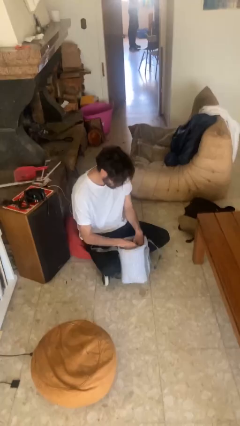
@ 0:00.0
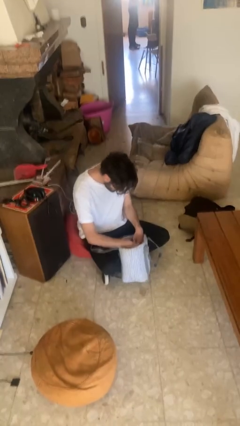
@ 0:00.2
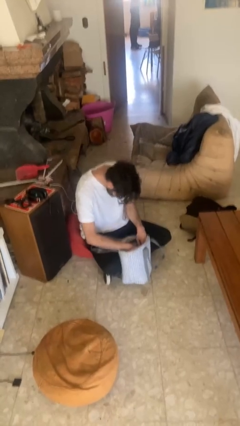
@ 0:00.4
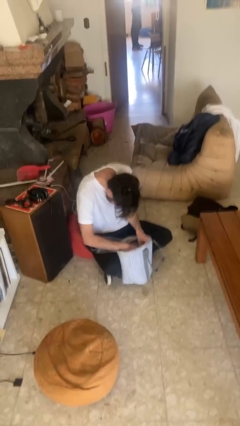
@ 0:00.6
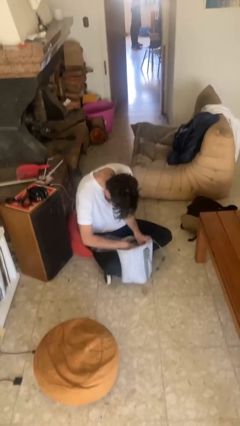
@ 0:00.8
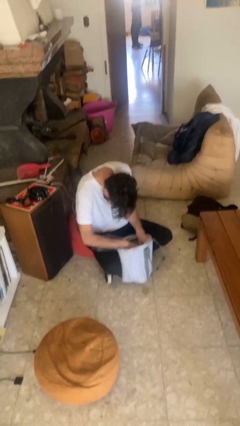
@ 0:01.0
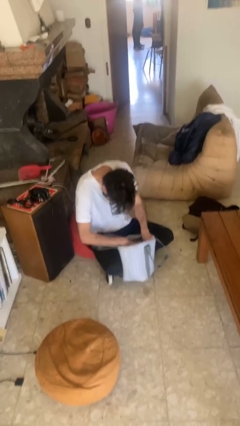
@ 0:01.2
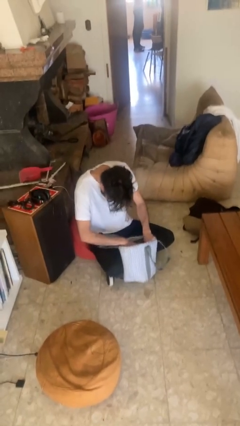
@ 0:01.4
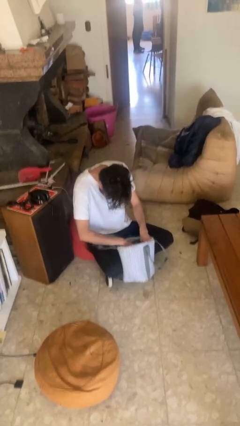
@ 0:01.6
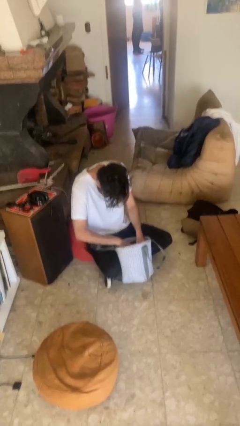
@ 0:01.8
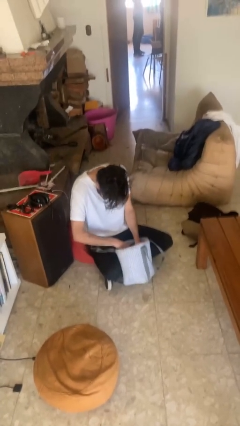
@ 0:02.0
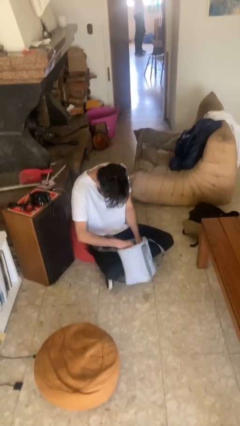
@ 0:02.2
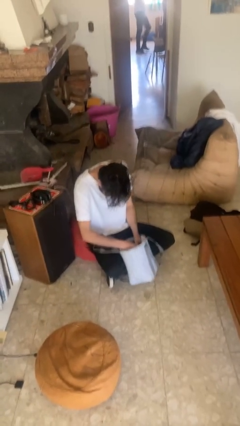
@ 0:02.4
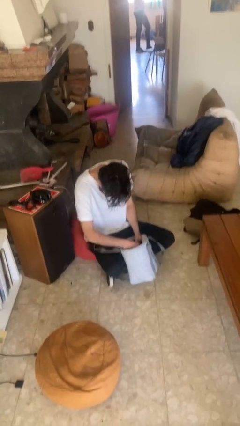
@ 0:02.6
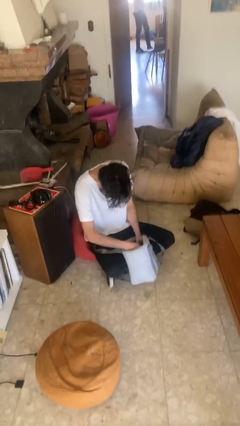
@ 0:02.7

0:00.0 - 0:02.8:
person searches in purse

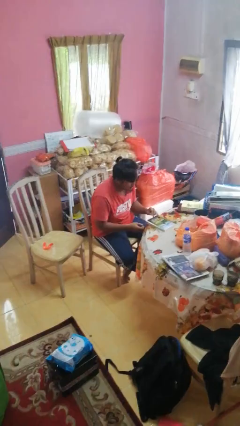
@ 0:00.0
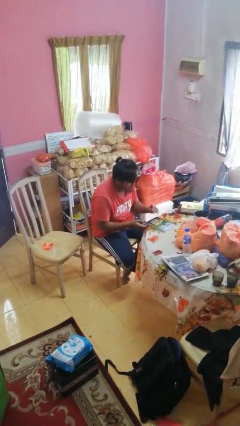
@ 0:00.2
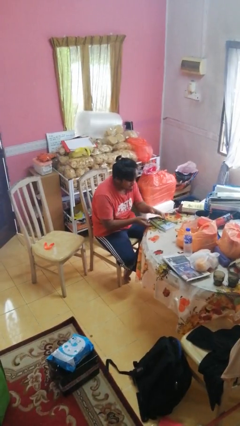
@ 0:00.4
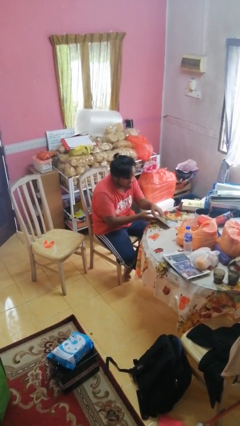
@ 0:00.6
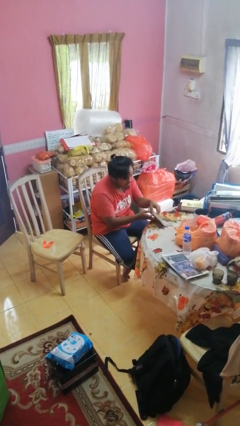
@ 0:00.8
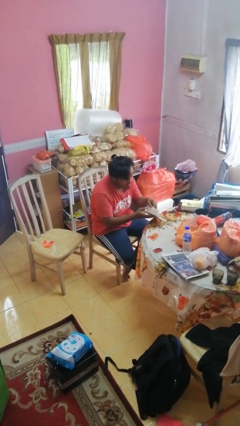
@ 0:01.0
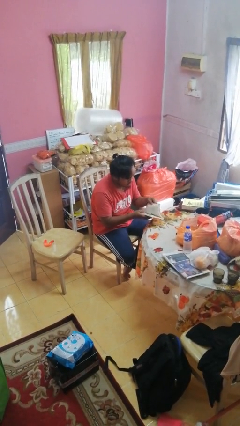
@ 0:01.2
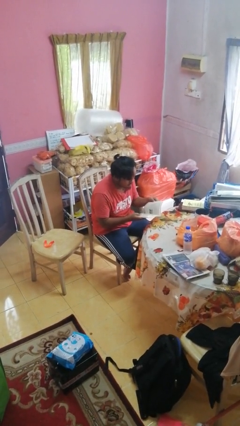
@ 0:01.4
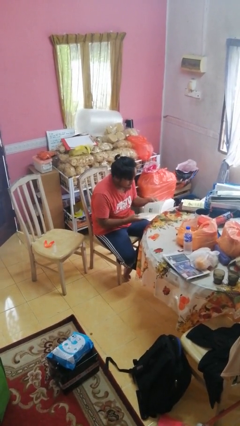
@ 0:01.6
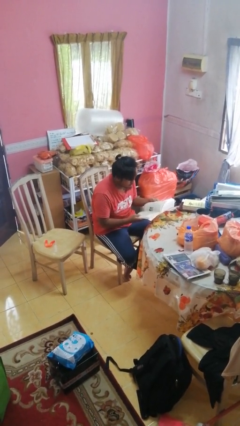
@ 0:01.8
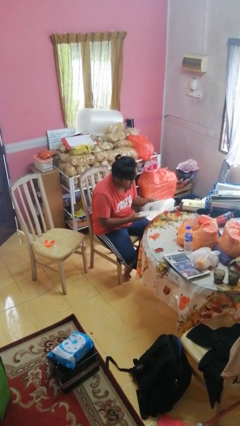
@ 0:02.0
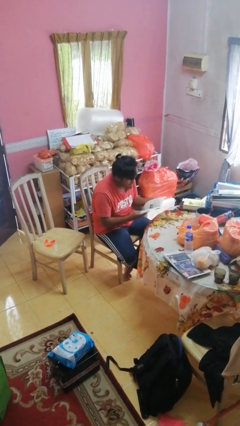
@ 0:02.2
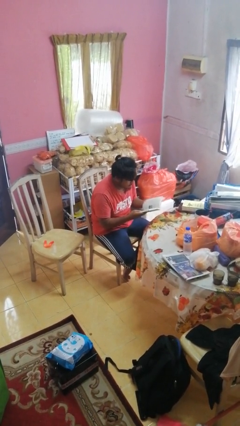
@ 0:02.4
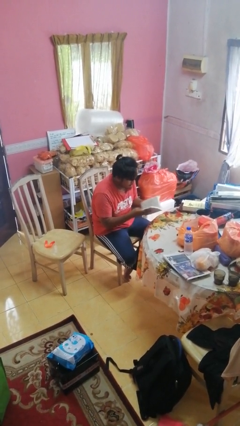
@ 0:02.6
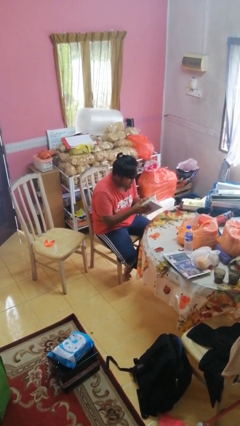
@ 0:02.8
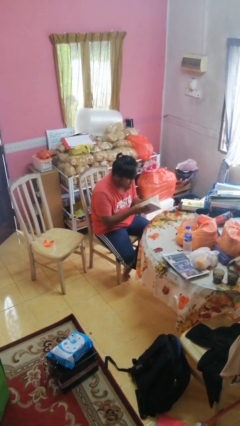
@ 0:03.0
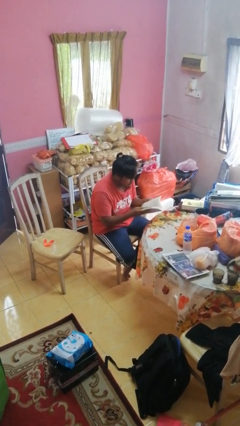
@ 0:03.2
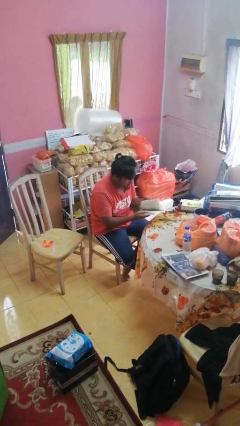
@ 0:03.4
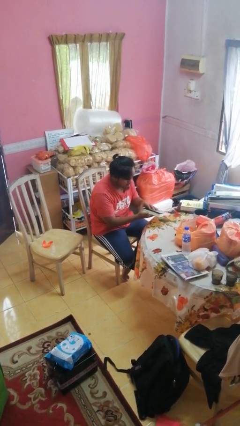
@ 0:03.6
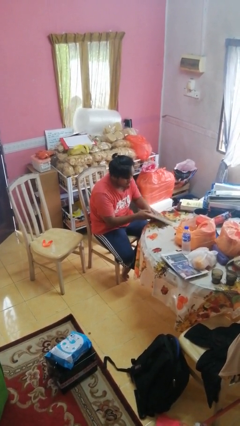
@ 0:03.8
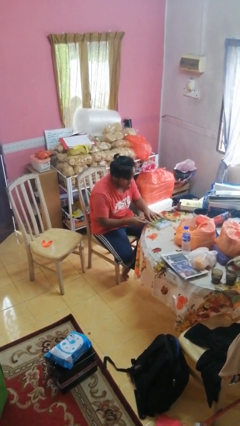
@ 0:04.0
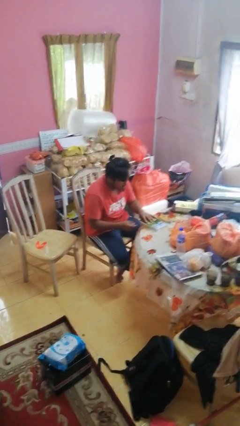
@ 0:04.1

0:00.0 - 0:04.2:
person reads book

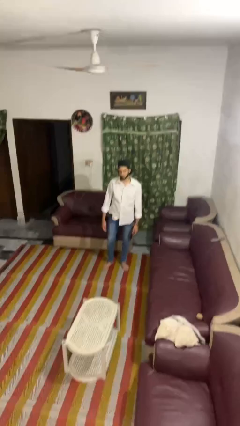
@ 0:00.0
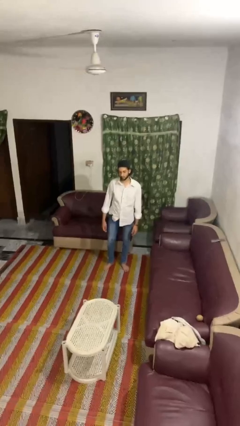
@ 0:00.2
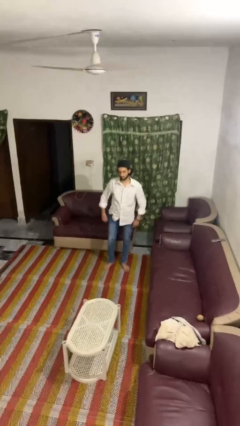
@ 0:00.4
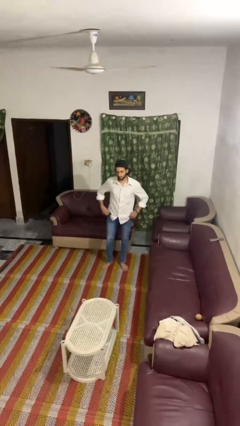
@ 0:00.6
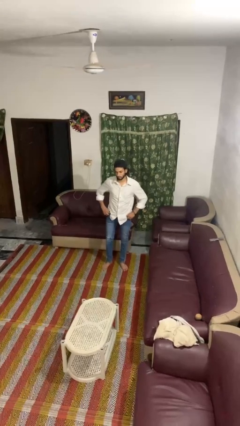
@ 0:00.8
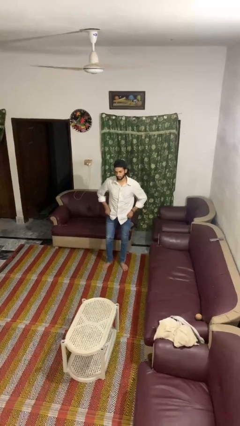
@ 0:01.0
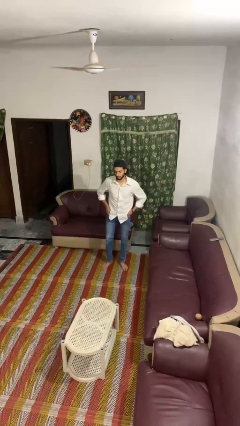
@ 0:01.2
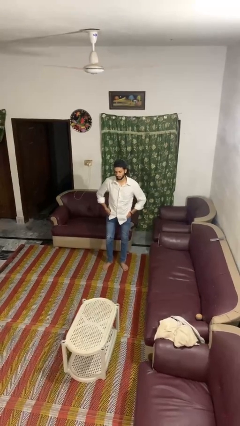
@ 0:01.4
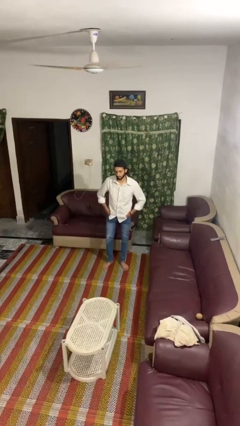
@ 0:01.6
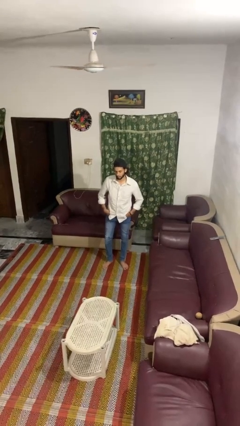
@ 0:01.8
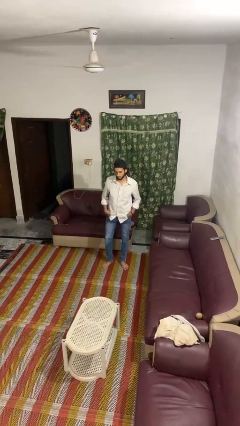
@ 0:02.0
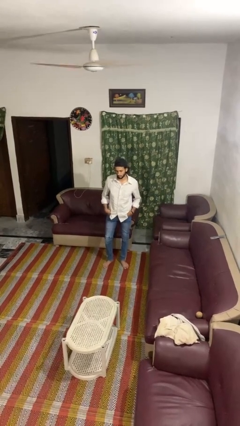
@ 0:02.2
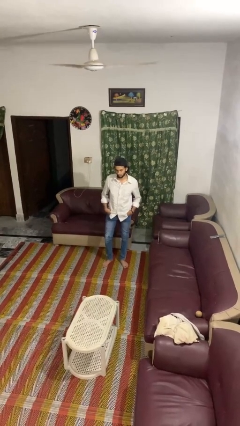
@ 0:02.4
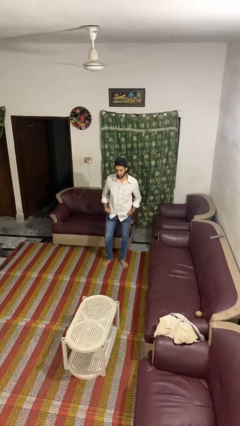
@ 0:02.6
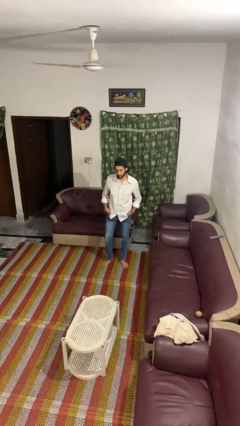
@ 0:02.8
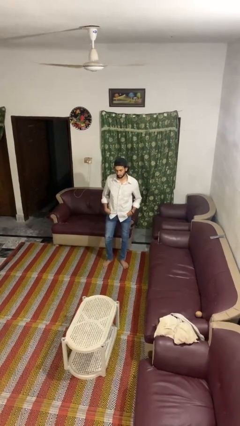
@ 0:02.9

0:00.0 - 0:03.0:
person puts hands in back pockets

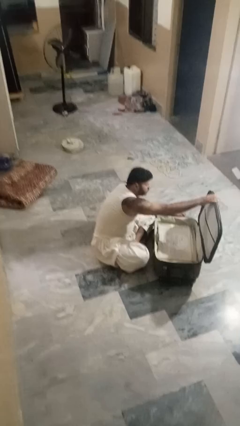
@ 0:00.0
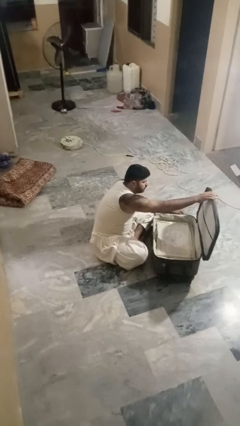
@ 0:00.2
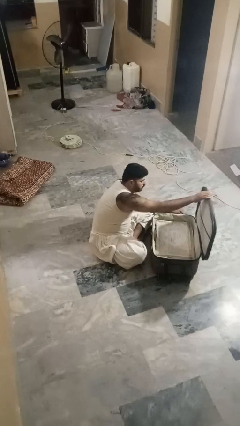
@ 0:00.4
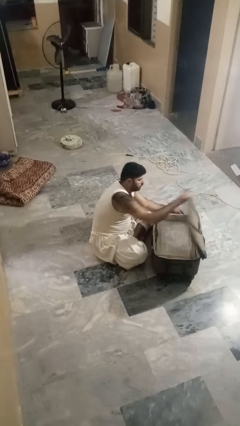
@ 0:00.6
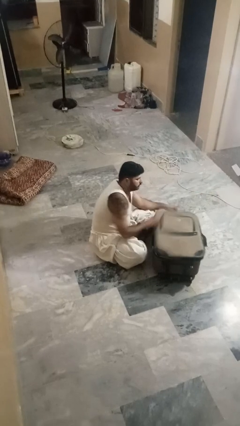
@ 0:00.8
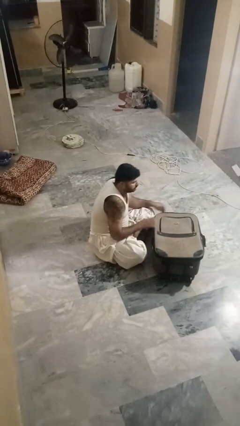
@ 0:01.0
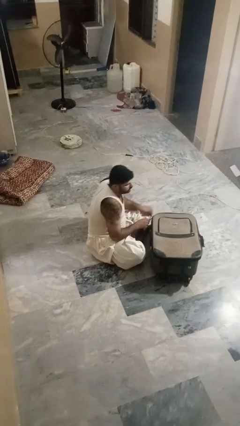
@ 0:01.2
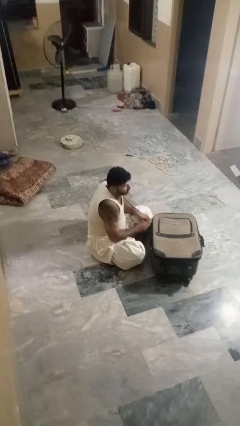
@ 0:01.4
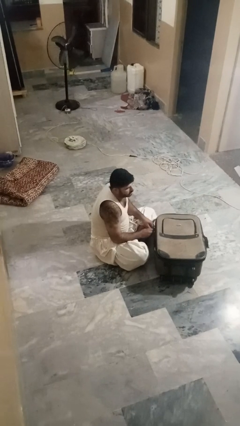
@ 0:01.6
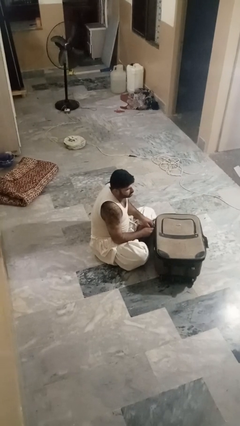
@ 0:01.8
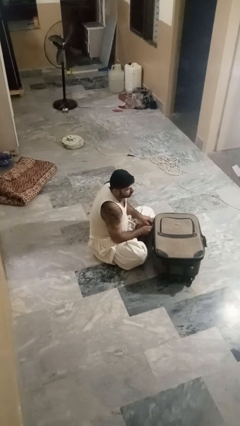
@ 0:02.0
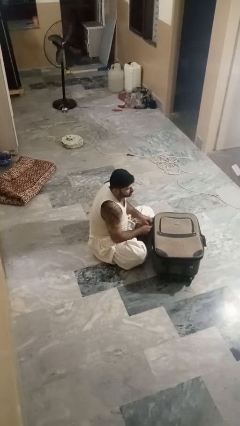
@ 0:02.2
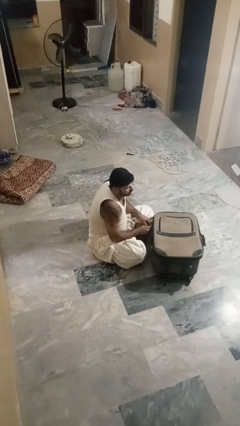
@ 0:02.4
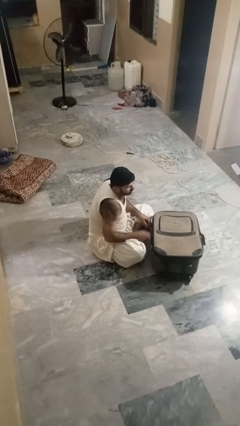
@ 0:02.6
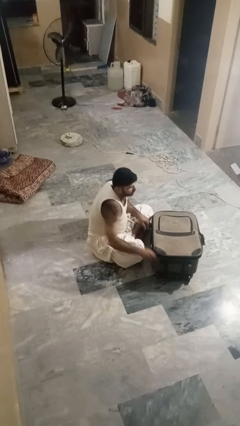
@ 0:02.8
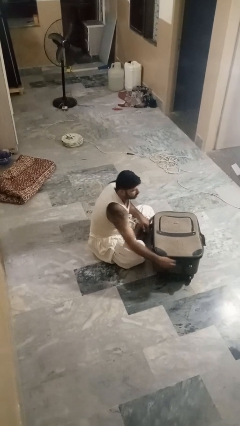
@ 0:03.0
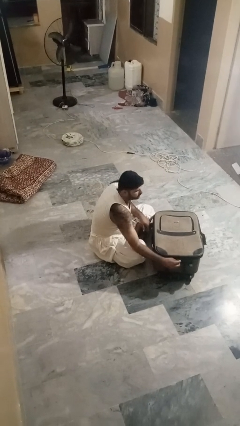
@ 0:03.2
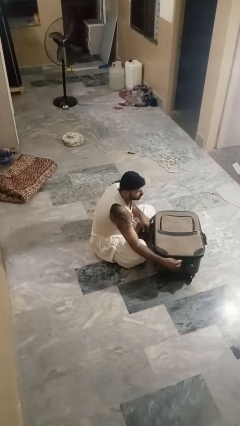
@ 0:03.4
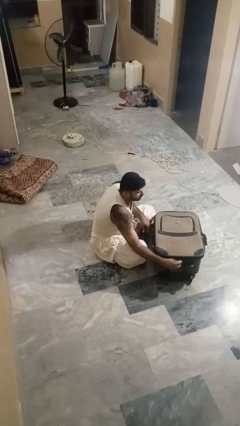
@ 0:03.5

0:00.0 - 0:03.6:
person closes suitcase

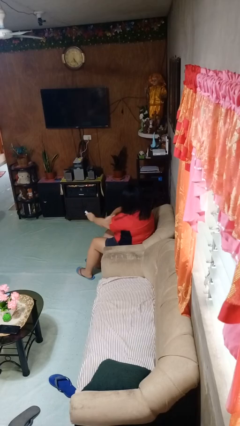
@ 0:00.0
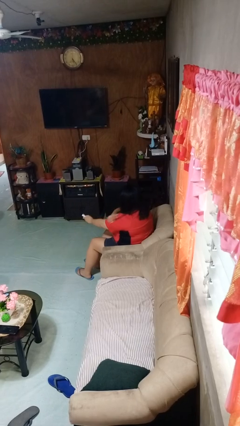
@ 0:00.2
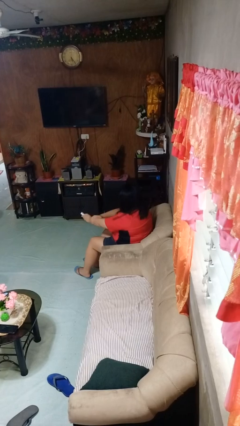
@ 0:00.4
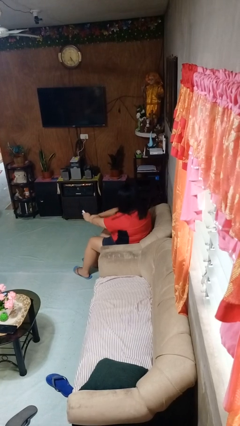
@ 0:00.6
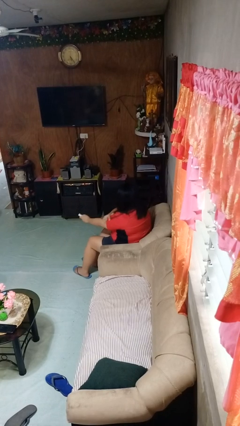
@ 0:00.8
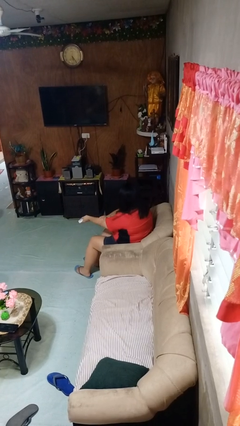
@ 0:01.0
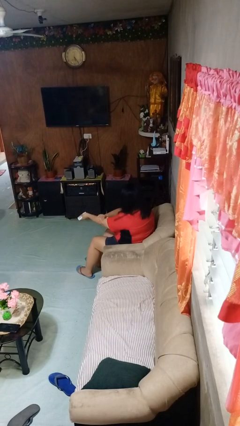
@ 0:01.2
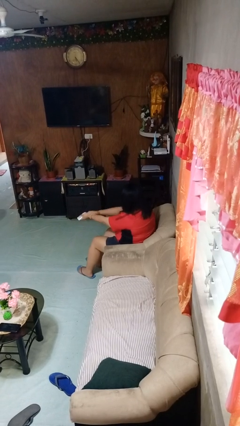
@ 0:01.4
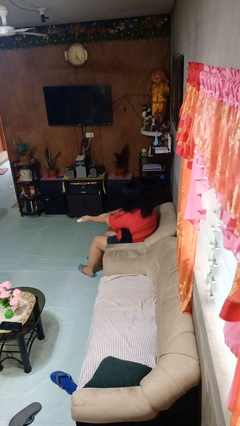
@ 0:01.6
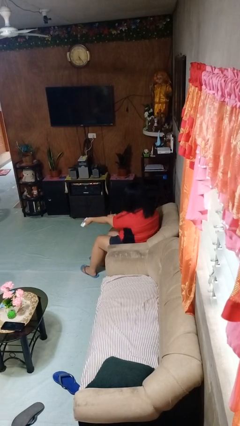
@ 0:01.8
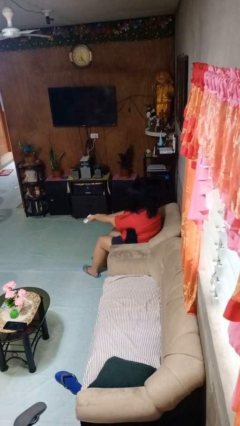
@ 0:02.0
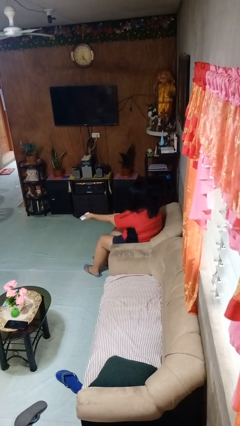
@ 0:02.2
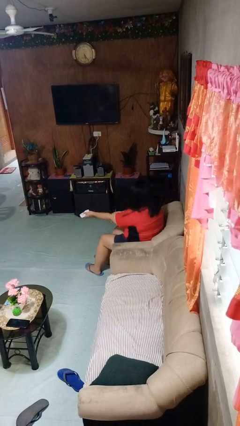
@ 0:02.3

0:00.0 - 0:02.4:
person applies sunscreen

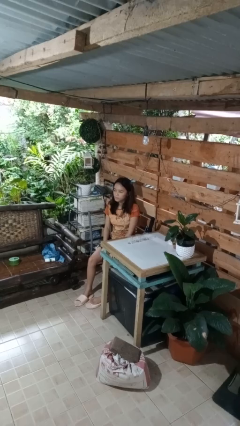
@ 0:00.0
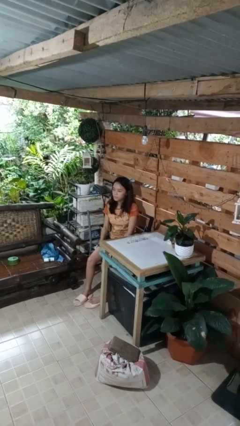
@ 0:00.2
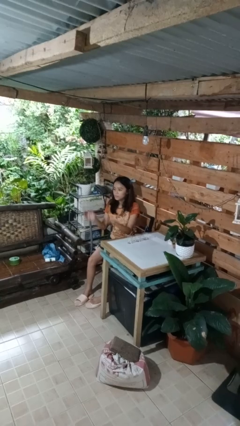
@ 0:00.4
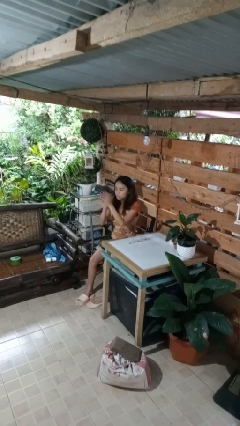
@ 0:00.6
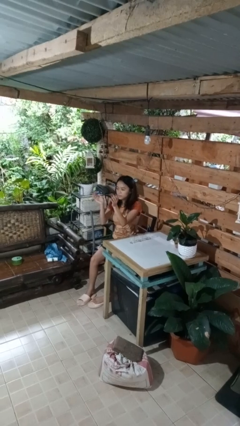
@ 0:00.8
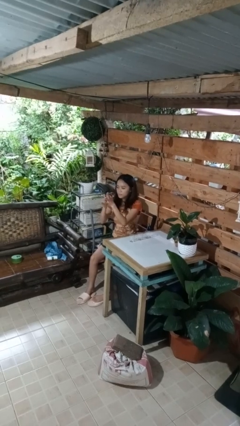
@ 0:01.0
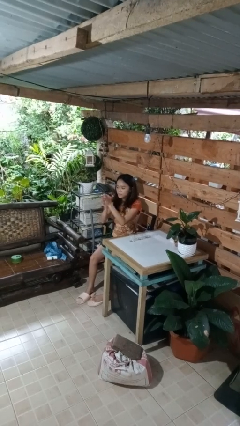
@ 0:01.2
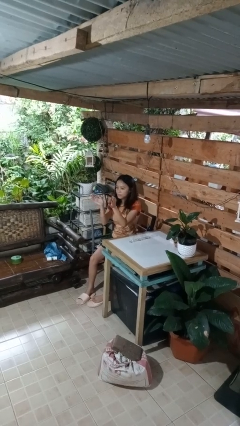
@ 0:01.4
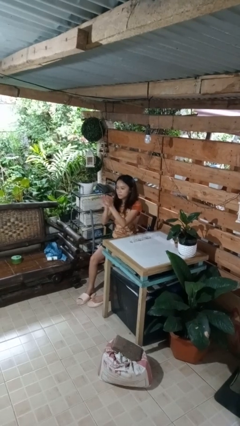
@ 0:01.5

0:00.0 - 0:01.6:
person claps hands
